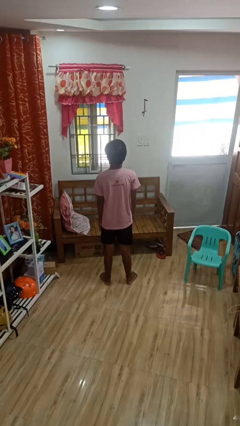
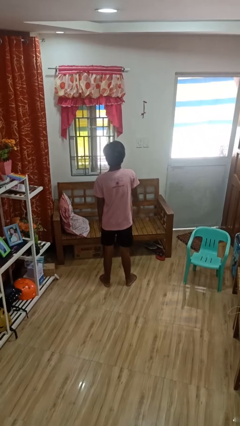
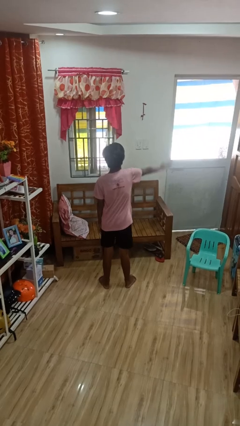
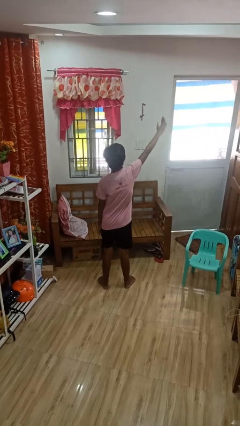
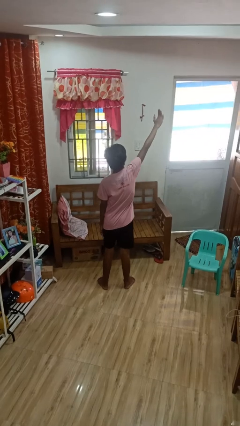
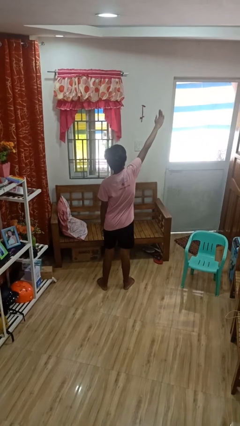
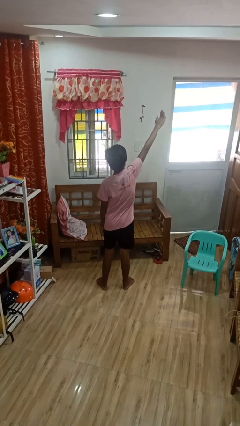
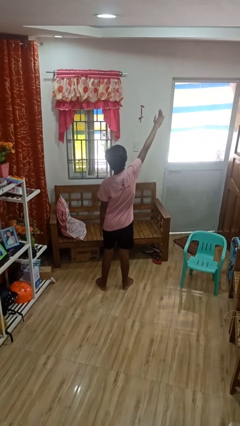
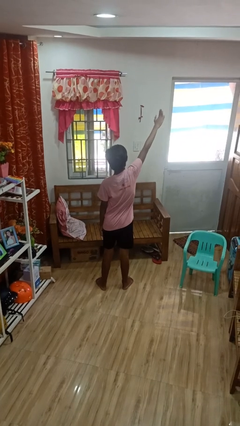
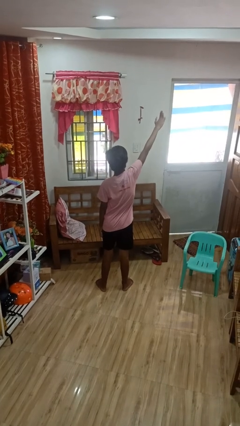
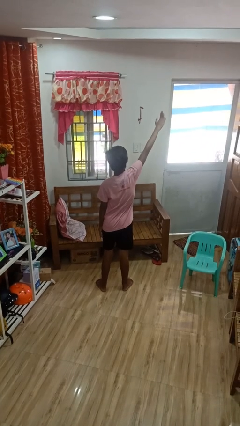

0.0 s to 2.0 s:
person gestures stop

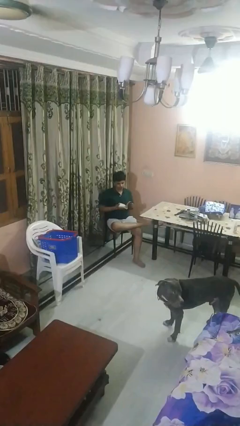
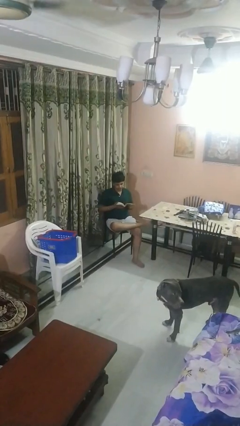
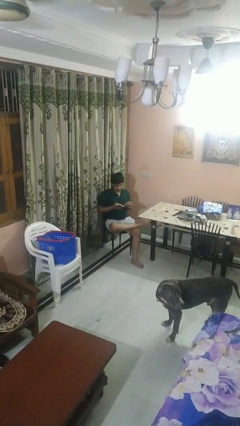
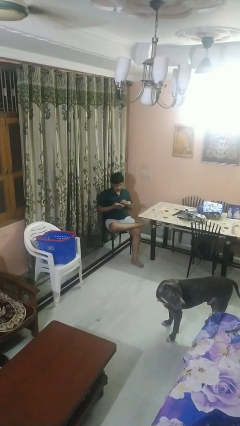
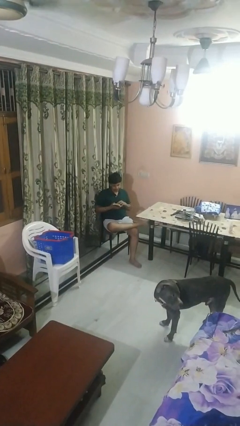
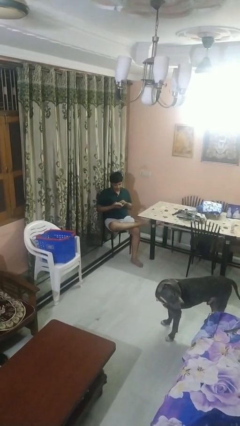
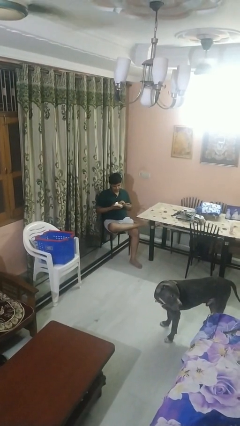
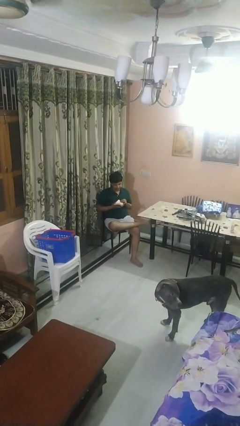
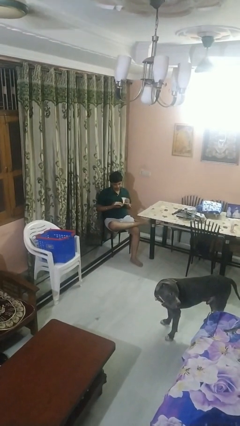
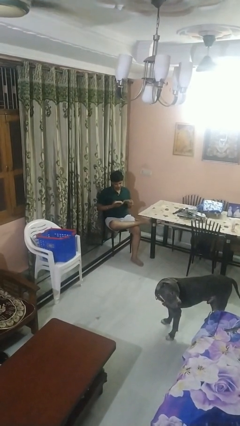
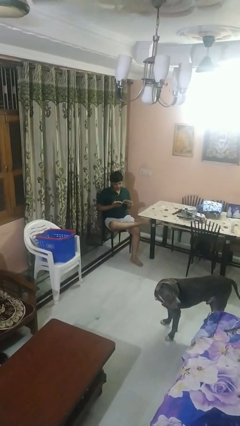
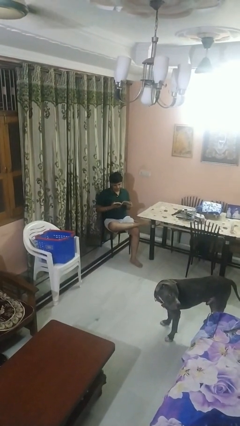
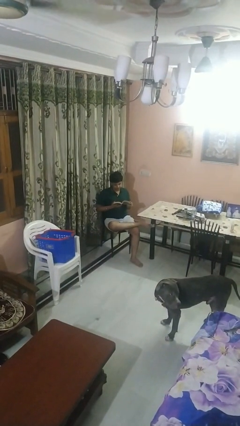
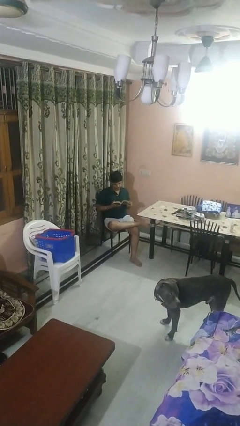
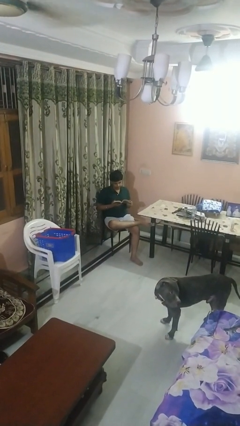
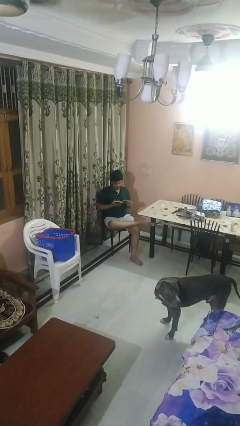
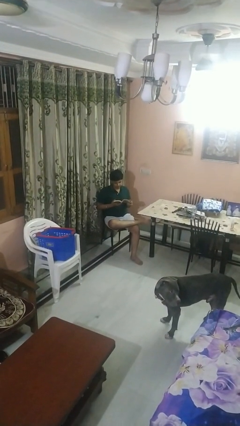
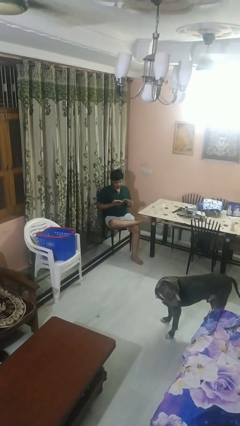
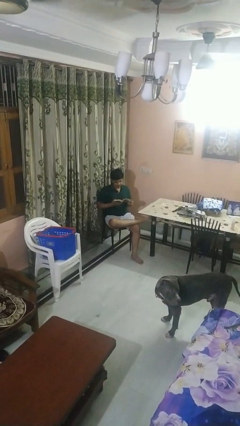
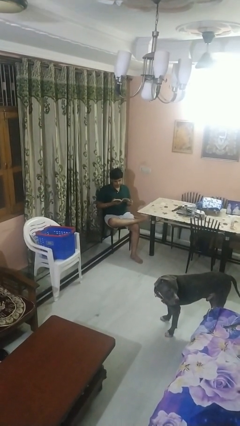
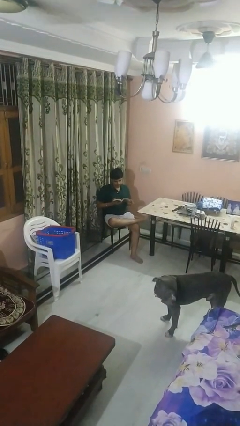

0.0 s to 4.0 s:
person reads book

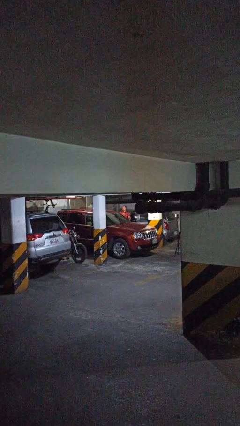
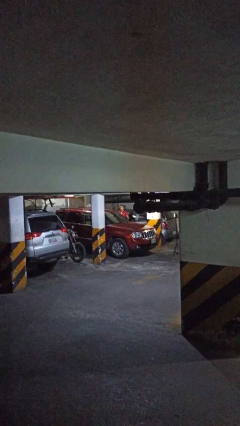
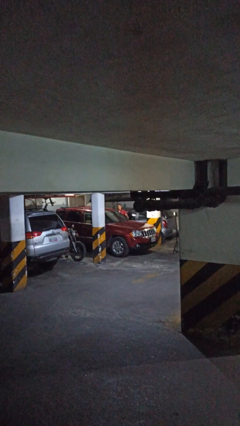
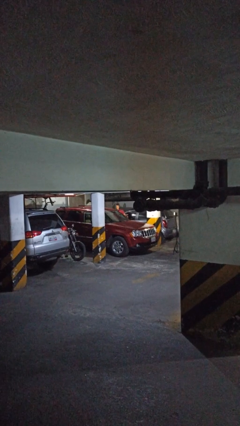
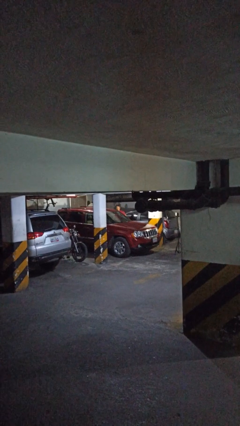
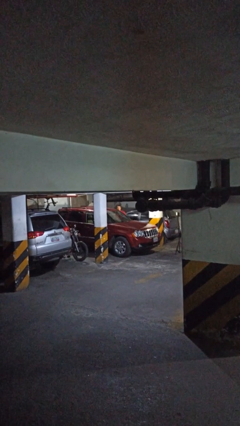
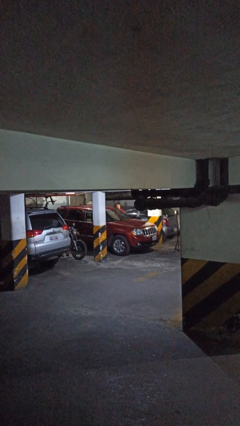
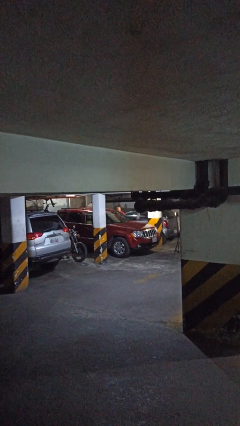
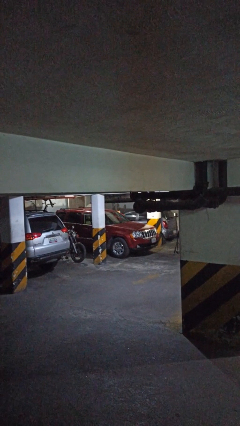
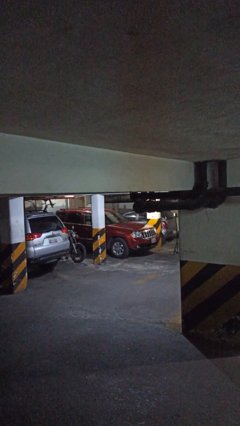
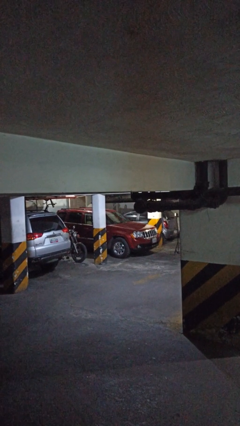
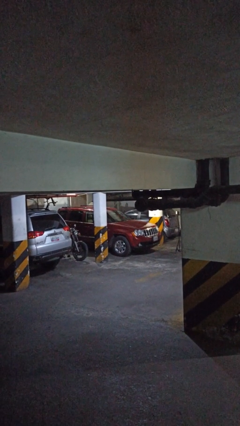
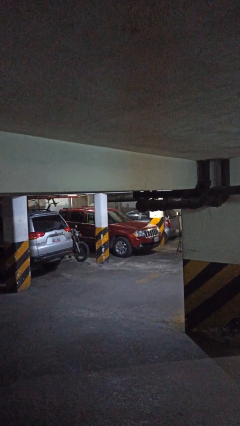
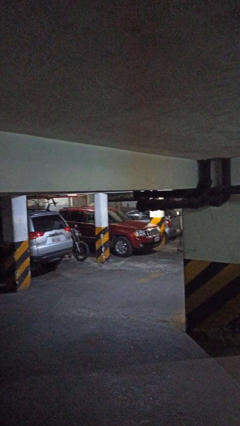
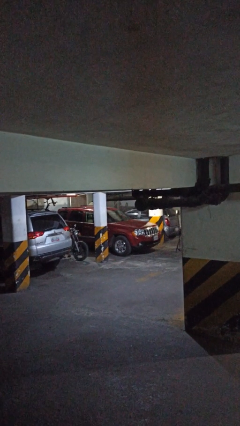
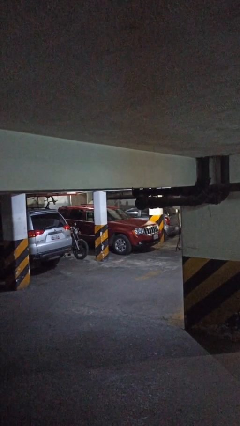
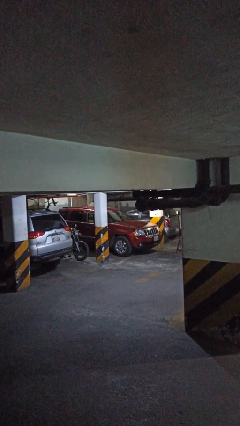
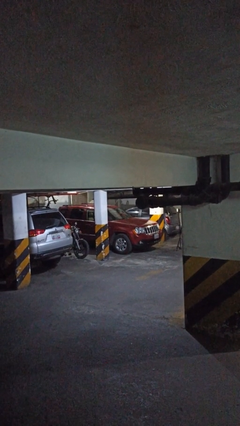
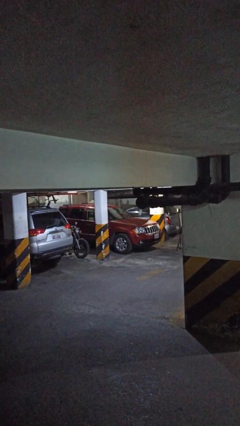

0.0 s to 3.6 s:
person enters car

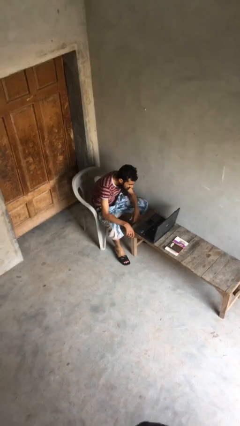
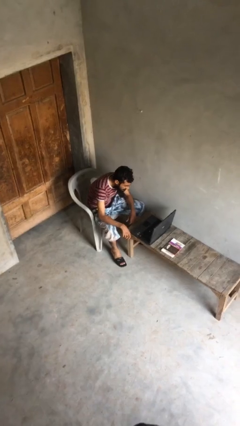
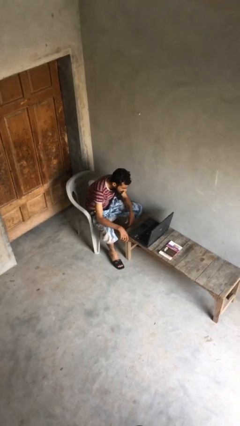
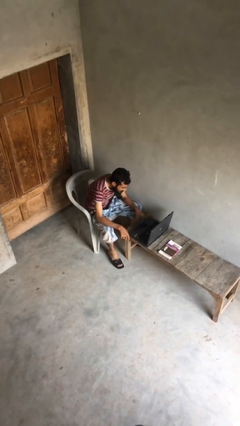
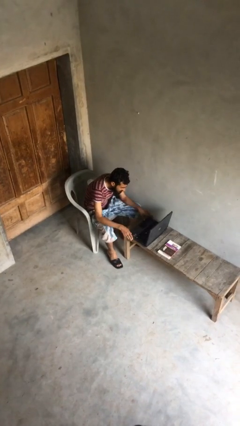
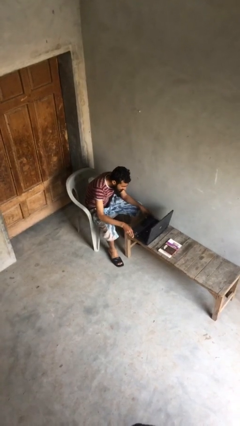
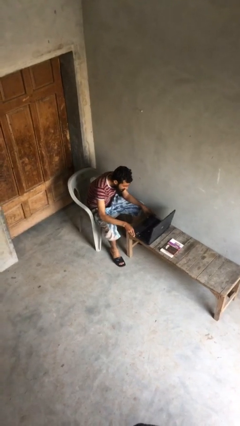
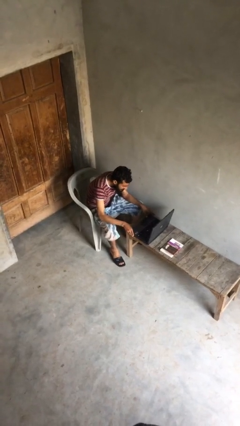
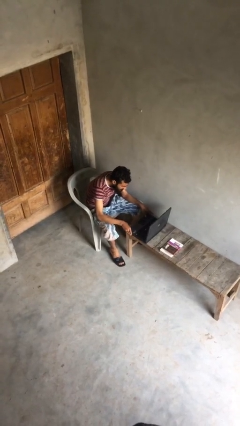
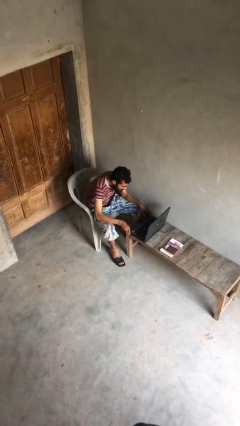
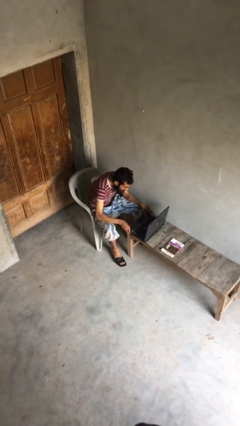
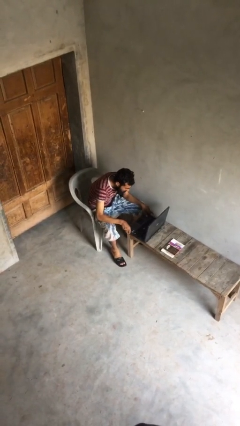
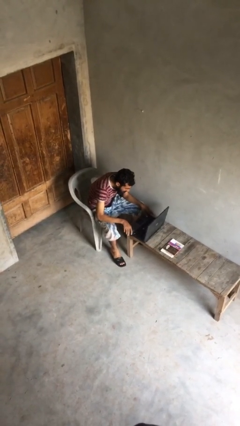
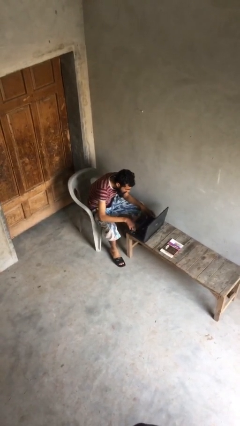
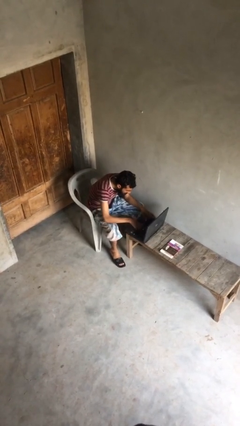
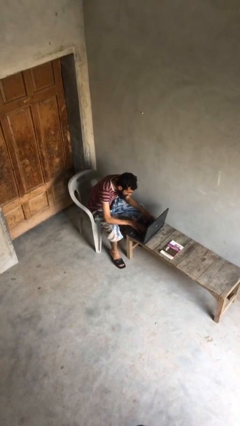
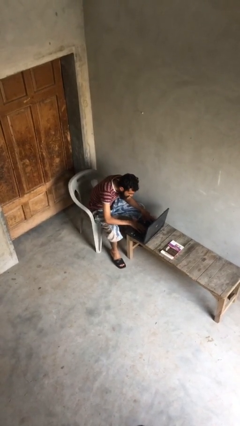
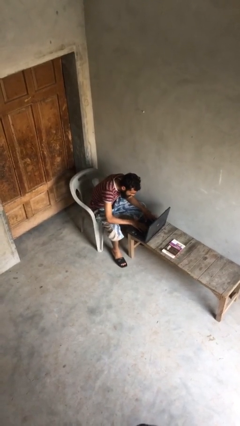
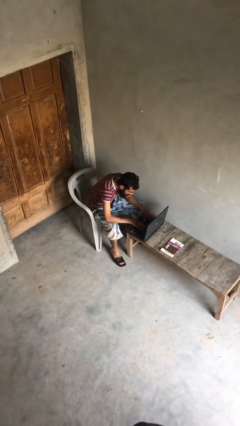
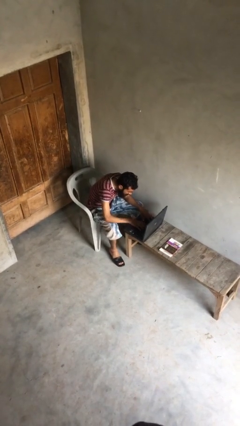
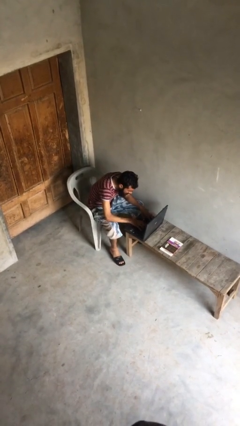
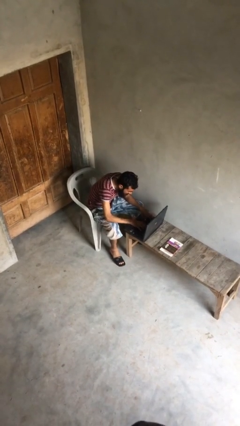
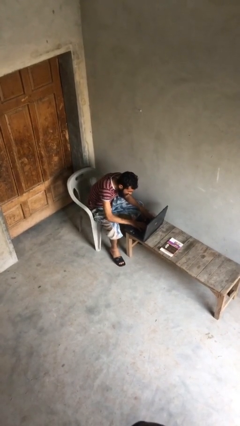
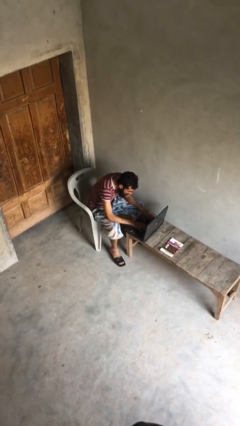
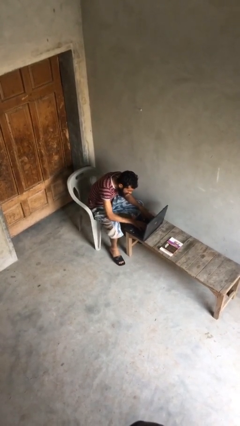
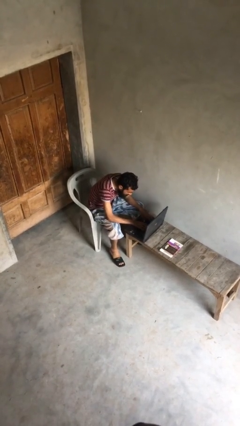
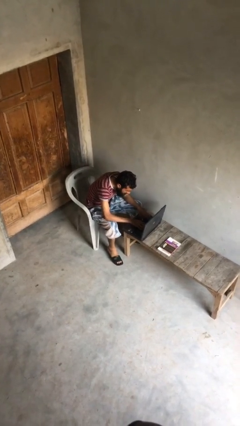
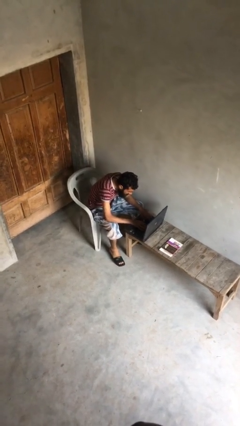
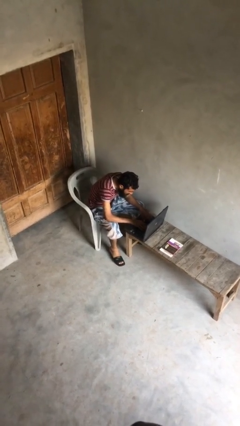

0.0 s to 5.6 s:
person interacts with laptop

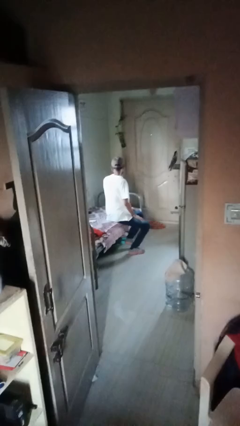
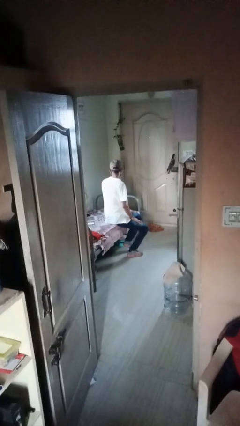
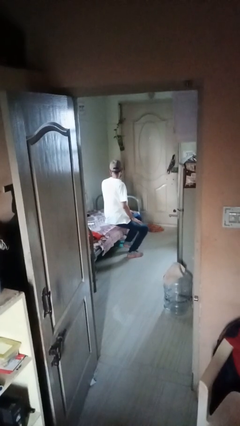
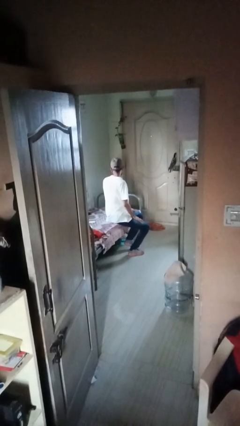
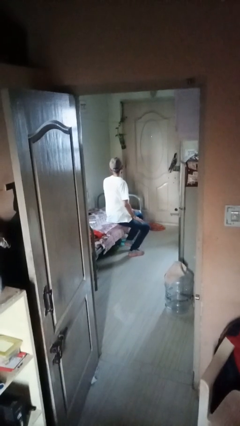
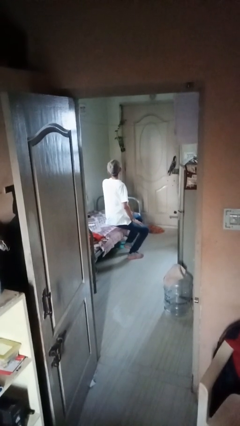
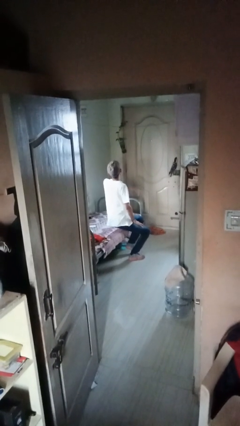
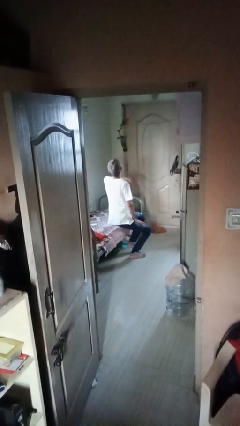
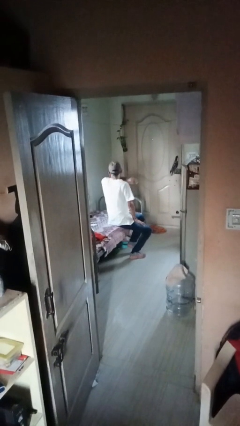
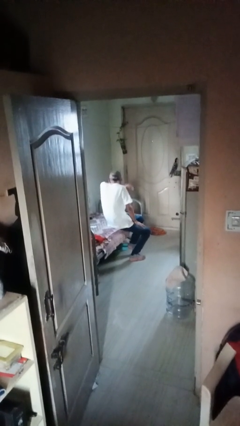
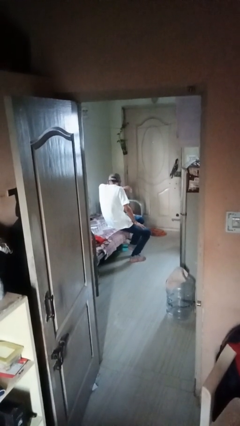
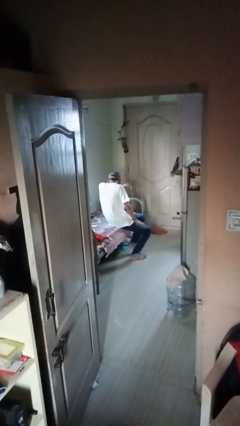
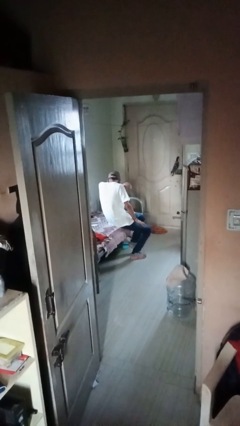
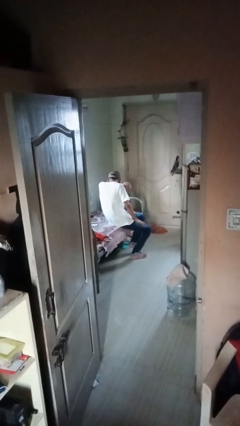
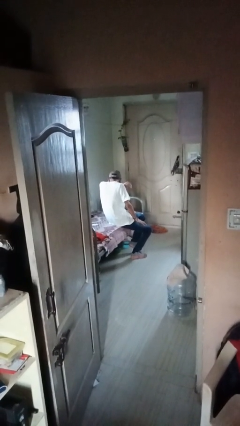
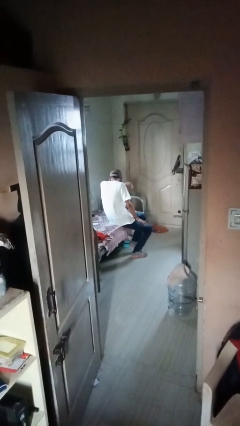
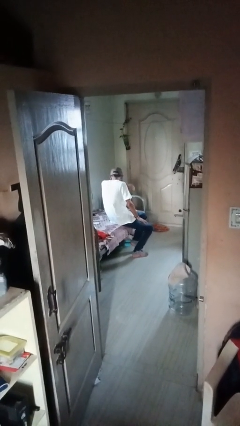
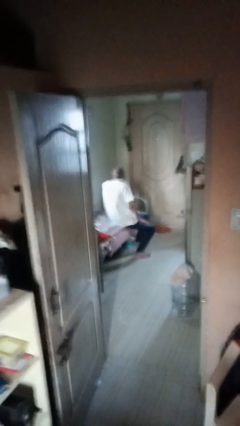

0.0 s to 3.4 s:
person sneezes into arm
